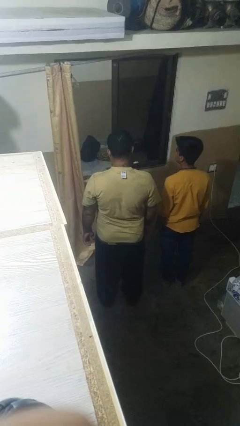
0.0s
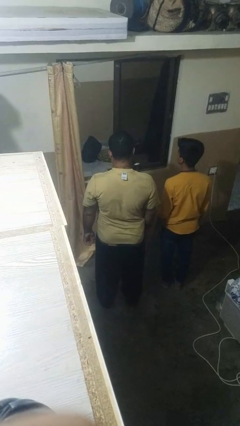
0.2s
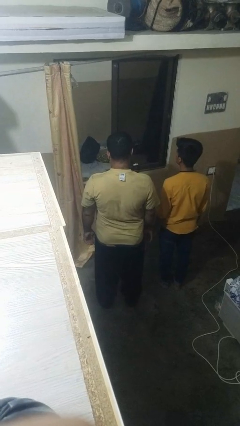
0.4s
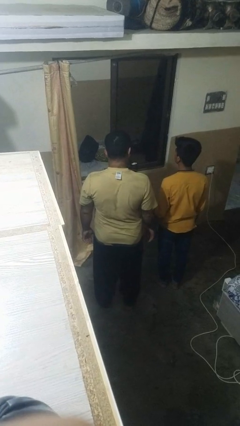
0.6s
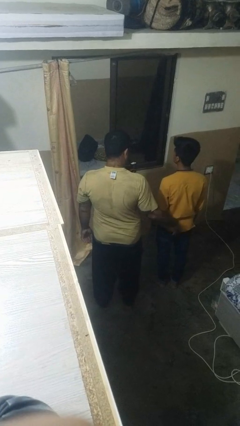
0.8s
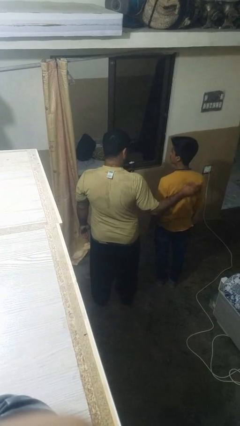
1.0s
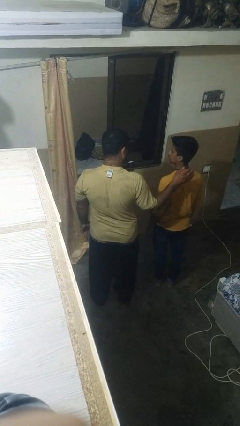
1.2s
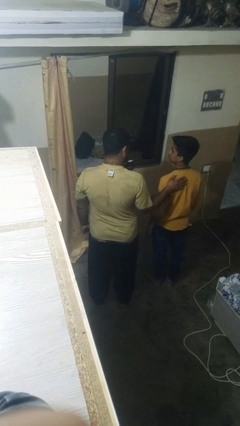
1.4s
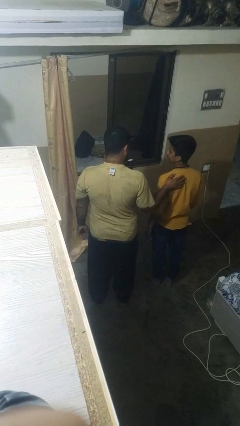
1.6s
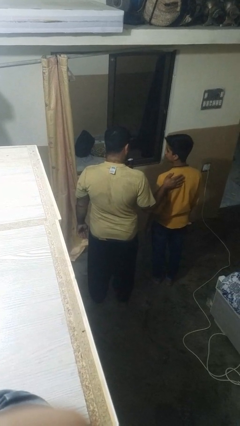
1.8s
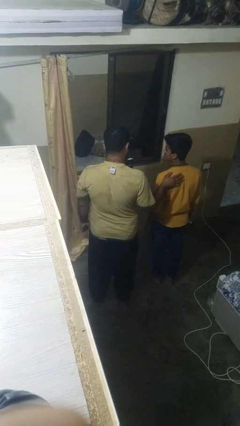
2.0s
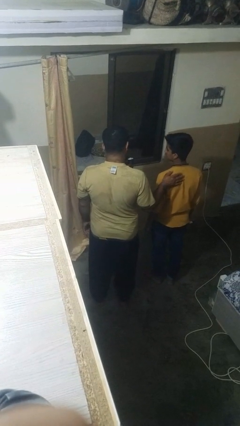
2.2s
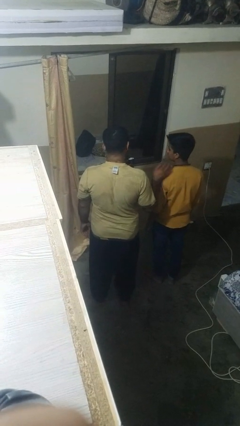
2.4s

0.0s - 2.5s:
person touches back of person

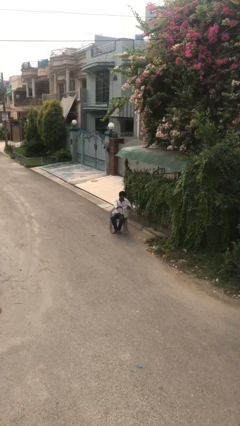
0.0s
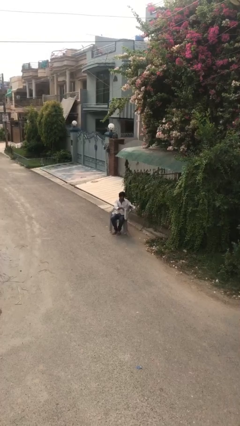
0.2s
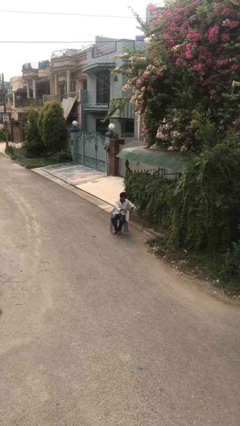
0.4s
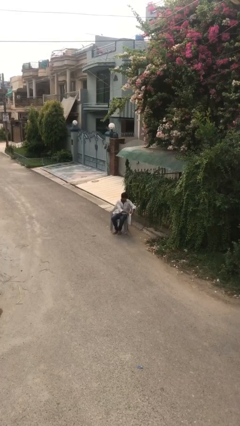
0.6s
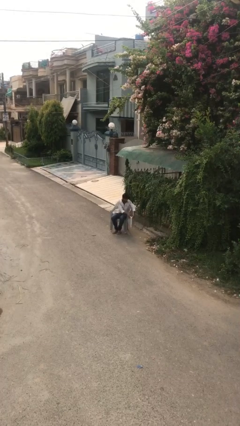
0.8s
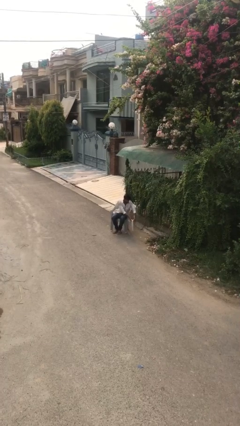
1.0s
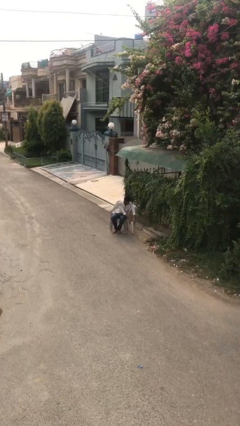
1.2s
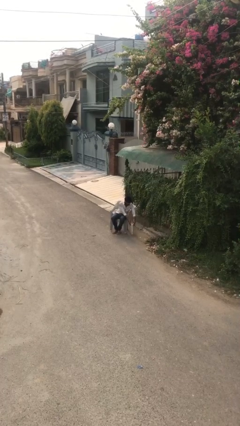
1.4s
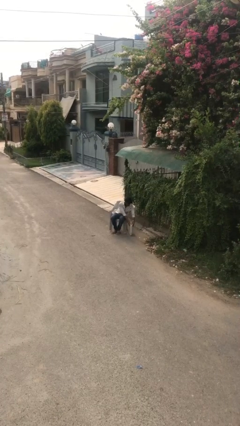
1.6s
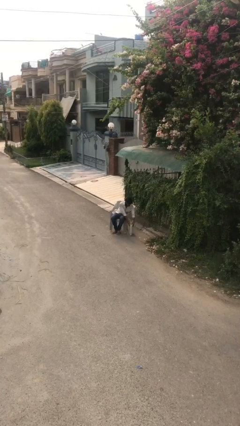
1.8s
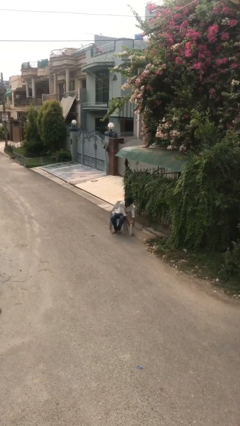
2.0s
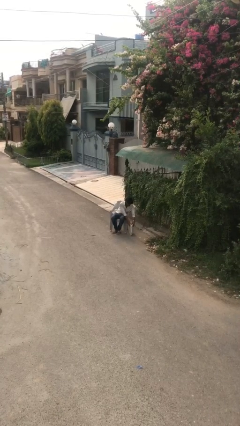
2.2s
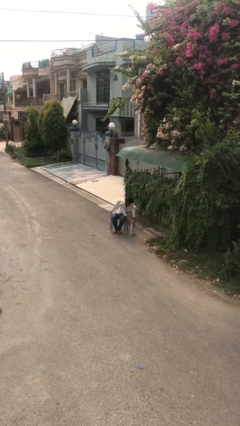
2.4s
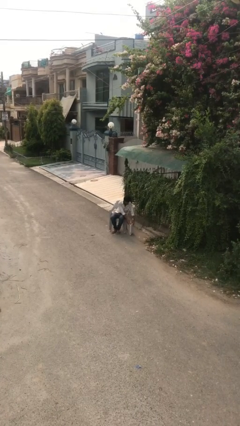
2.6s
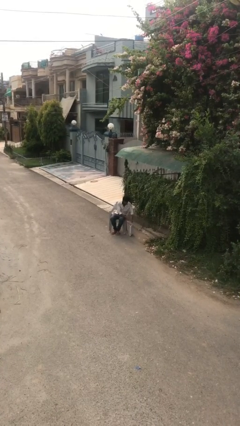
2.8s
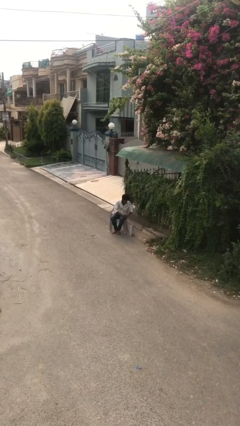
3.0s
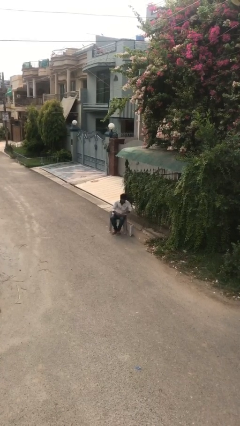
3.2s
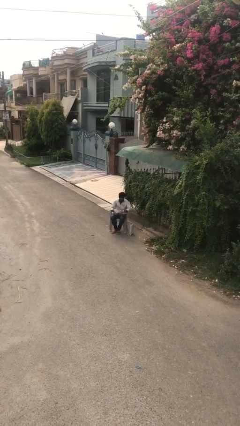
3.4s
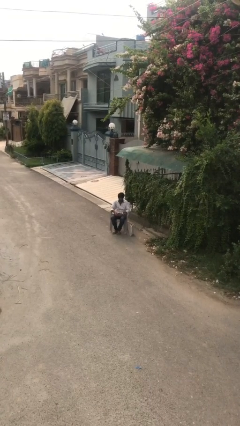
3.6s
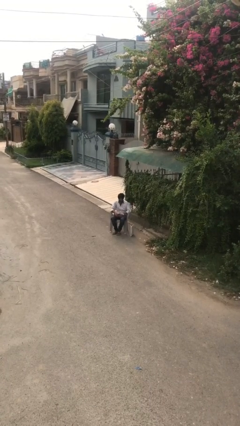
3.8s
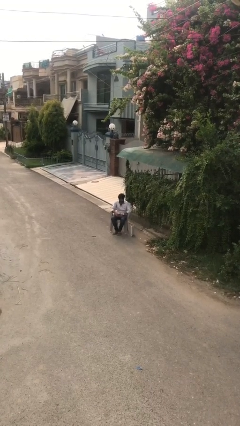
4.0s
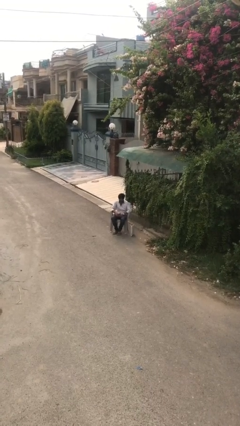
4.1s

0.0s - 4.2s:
person puts down object on floor

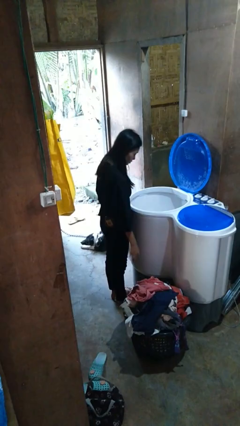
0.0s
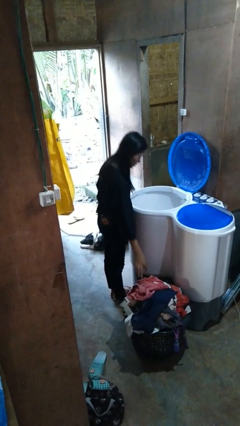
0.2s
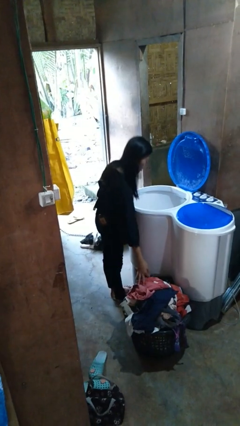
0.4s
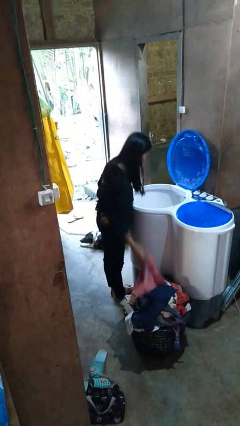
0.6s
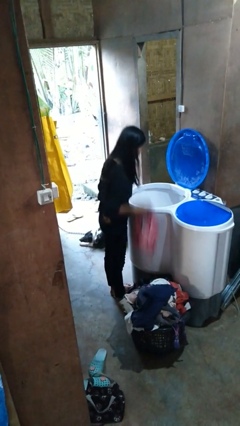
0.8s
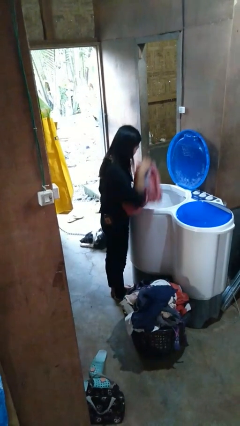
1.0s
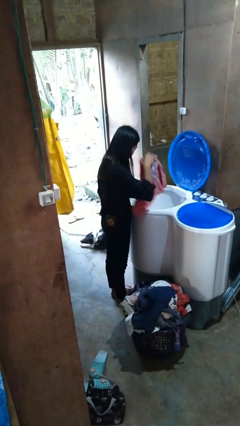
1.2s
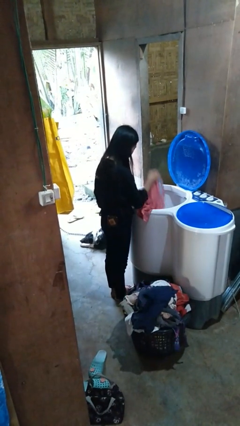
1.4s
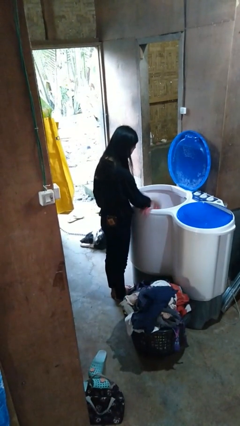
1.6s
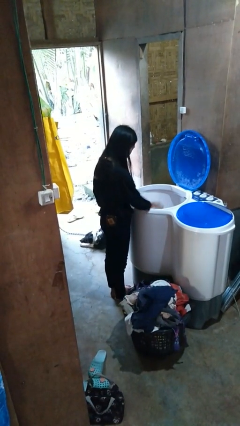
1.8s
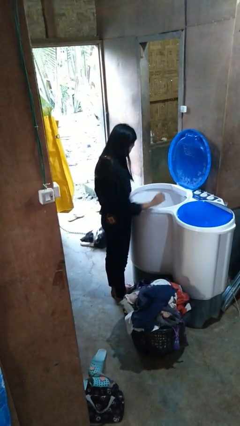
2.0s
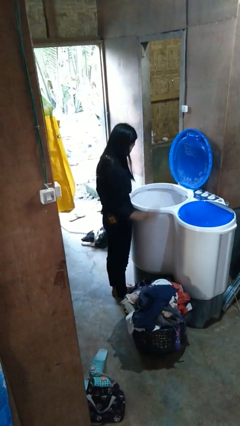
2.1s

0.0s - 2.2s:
person loads clotheswasher

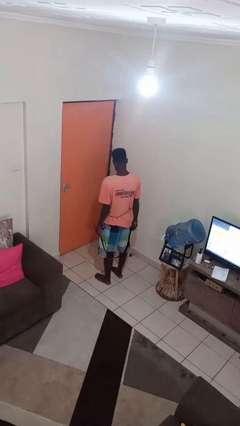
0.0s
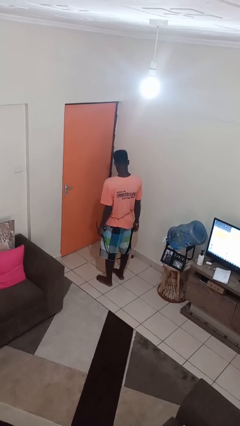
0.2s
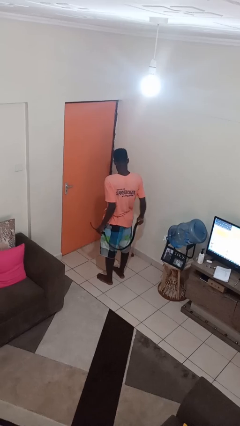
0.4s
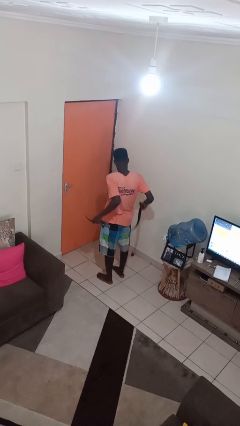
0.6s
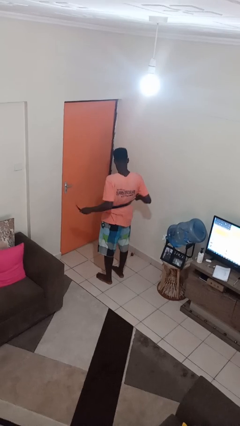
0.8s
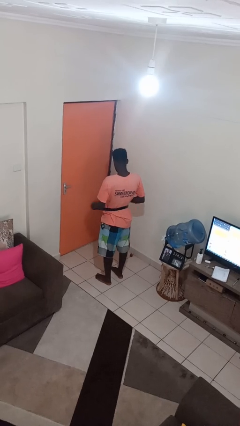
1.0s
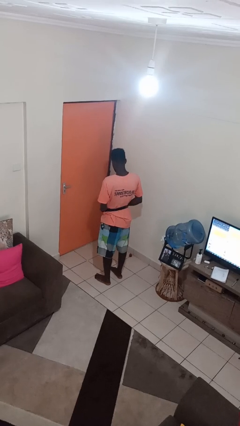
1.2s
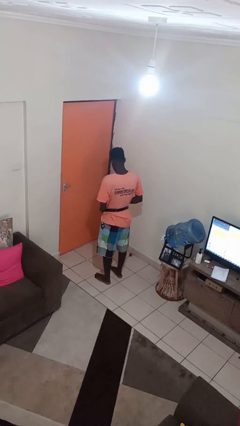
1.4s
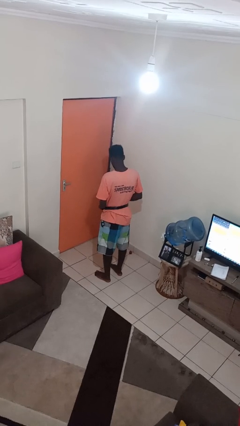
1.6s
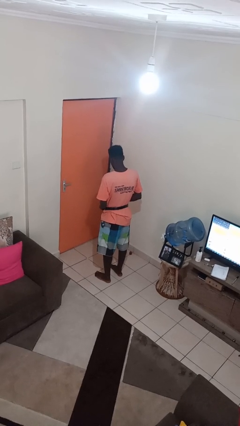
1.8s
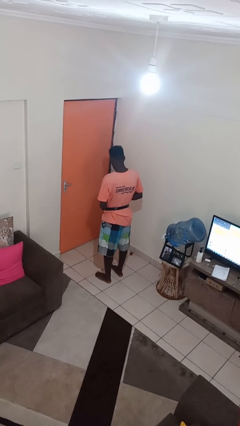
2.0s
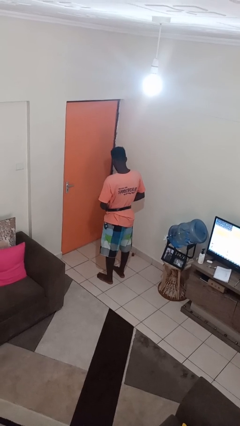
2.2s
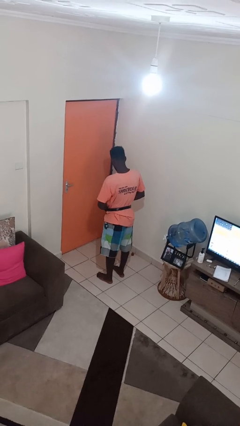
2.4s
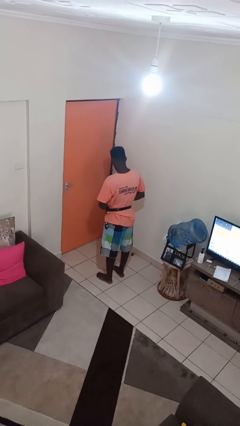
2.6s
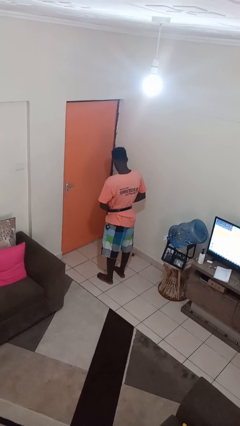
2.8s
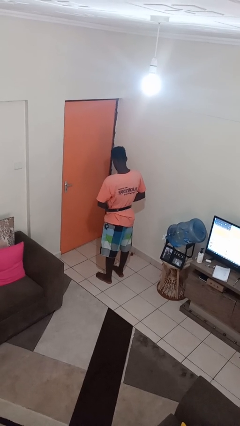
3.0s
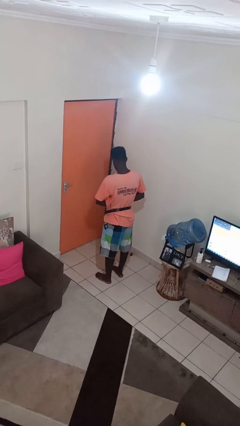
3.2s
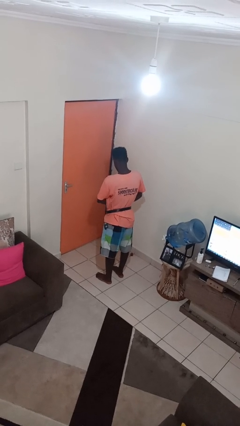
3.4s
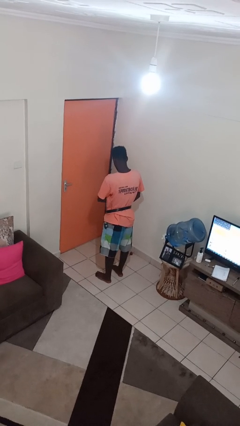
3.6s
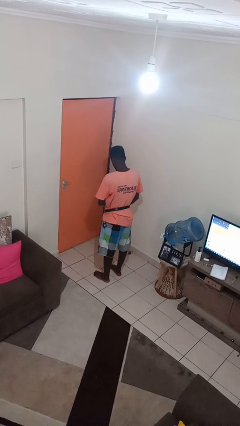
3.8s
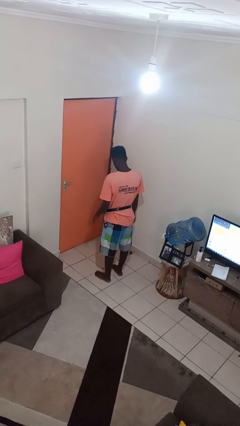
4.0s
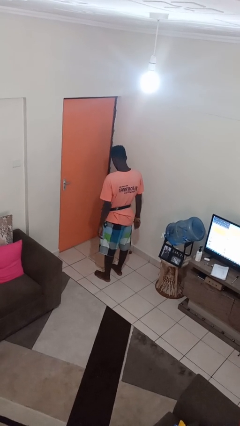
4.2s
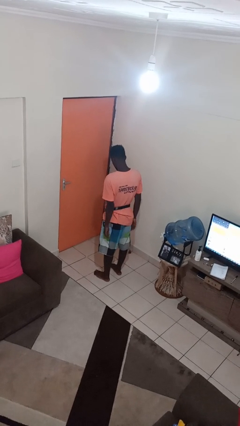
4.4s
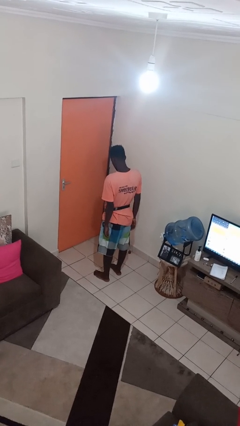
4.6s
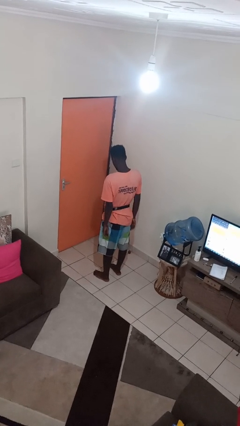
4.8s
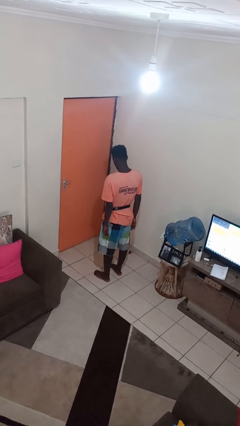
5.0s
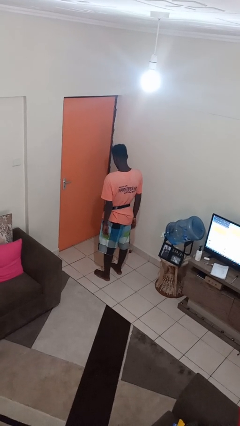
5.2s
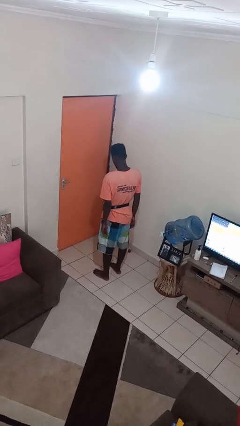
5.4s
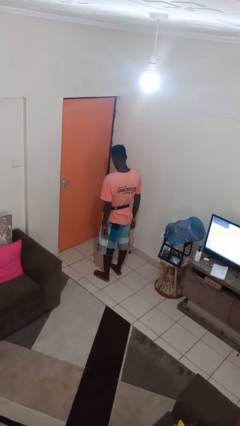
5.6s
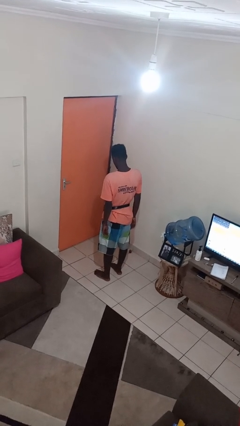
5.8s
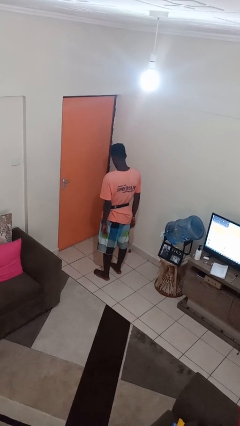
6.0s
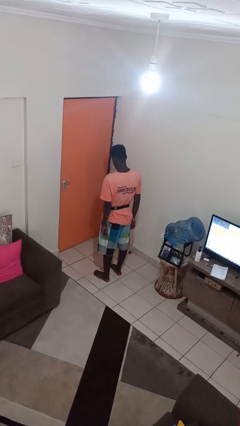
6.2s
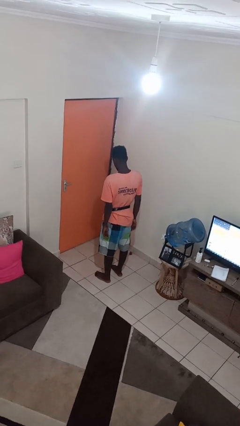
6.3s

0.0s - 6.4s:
person puts on belt

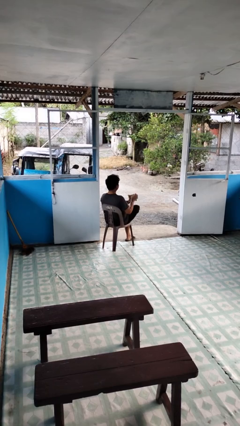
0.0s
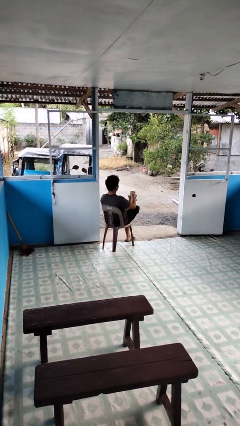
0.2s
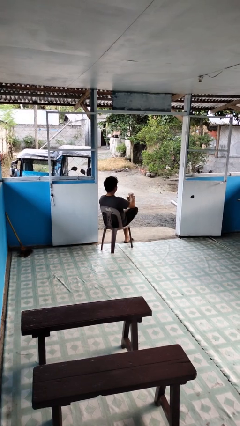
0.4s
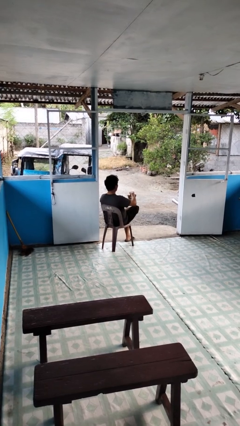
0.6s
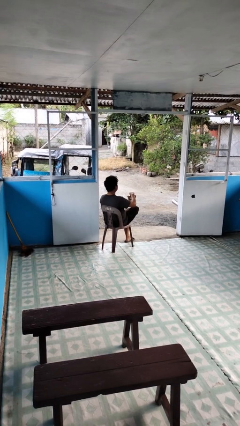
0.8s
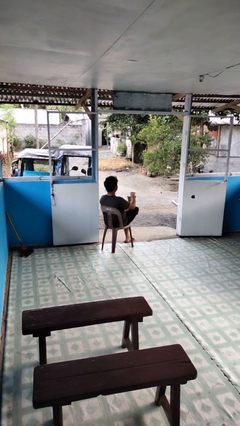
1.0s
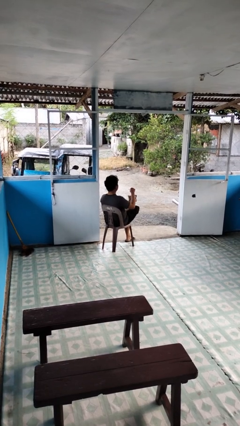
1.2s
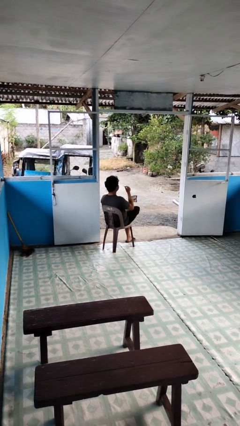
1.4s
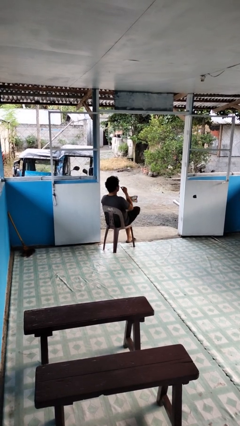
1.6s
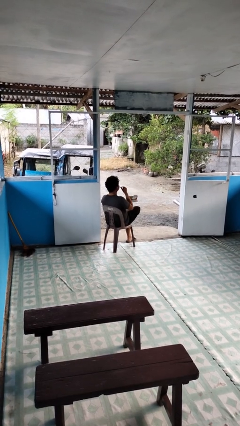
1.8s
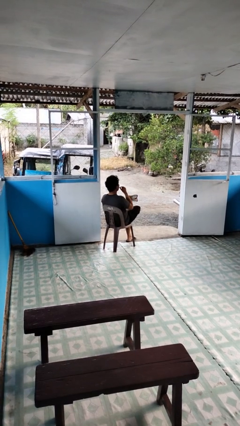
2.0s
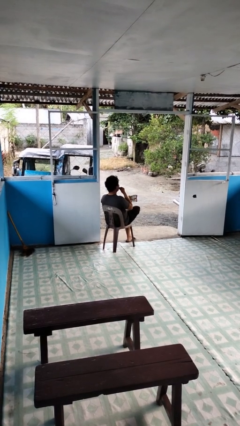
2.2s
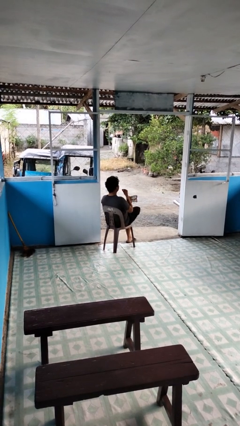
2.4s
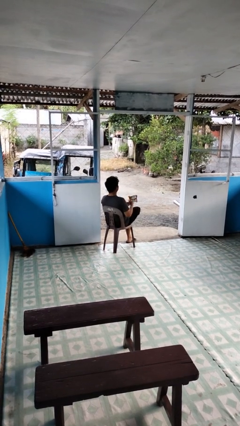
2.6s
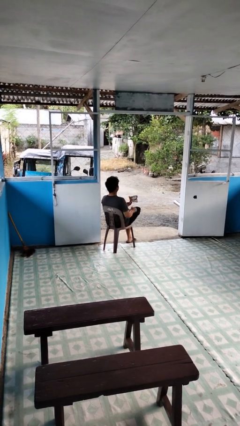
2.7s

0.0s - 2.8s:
person eats snack from bag
